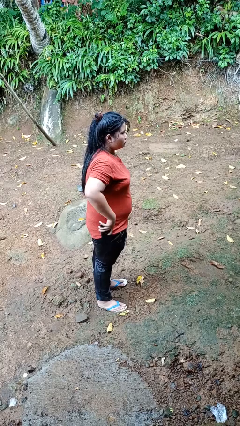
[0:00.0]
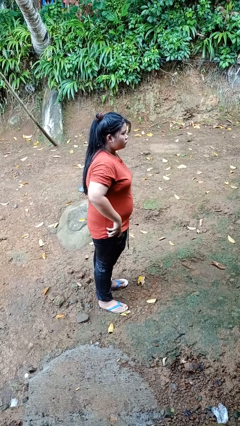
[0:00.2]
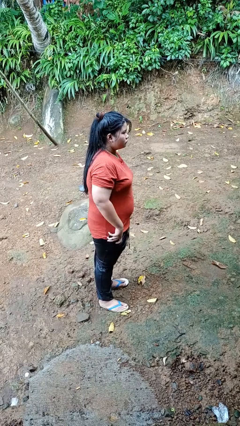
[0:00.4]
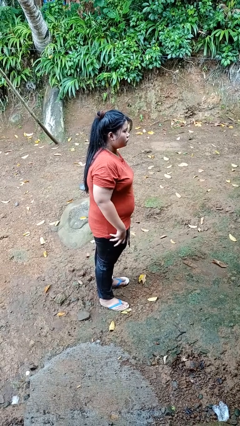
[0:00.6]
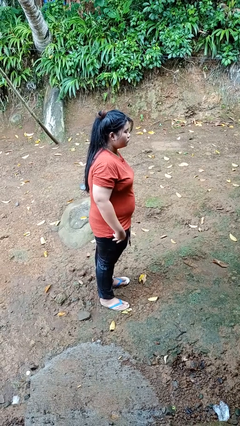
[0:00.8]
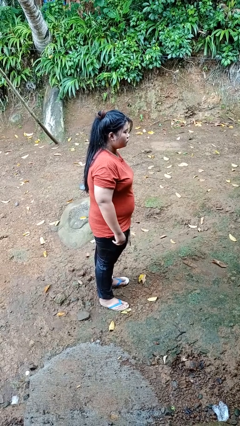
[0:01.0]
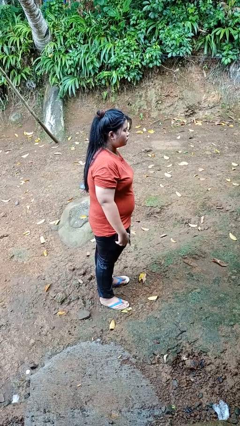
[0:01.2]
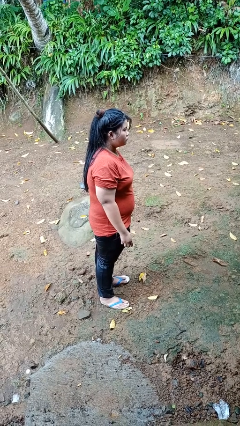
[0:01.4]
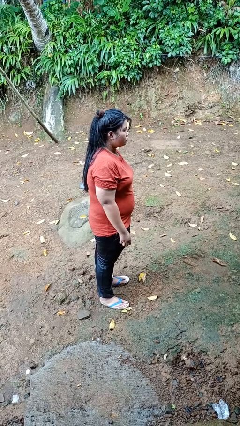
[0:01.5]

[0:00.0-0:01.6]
person puts phone into pocket

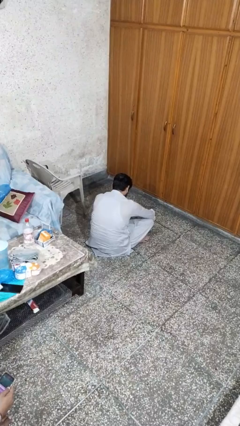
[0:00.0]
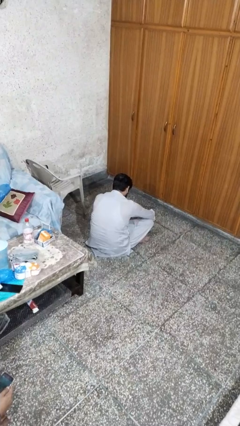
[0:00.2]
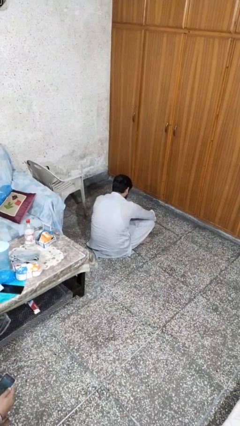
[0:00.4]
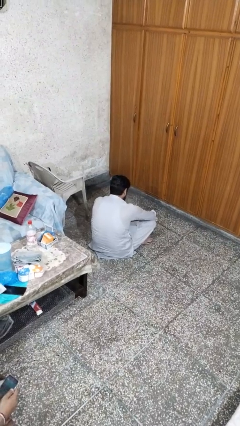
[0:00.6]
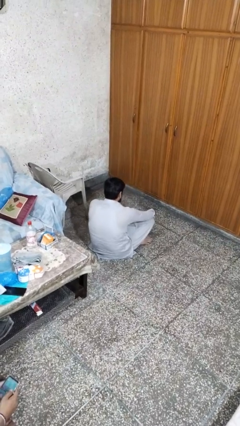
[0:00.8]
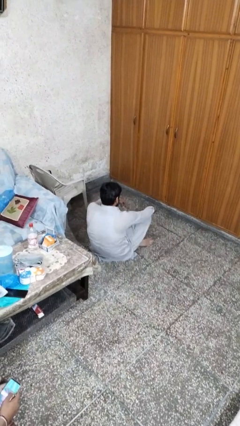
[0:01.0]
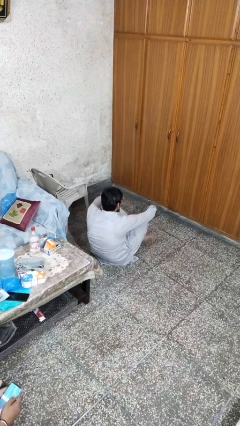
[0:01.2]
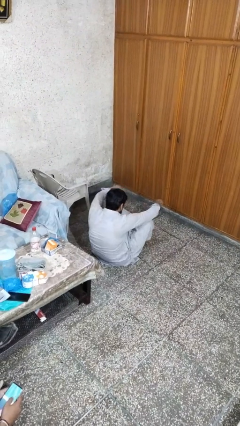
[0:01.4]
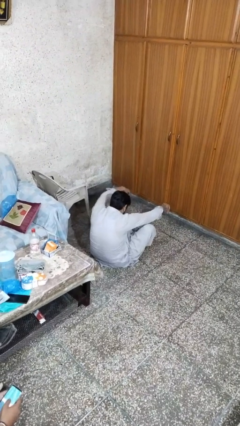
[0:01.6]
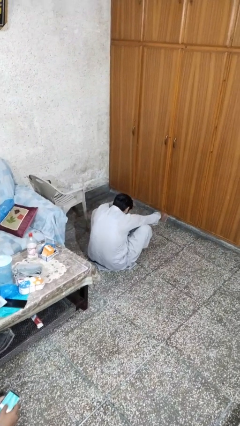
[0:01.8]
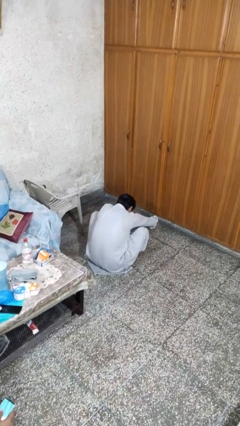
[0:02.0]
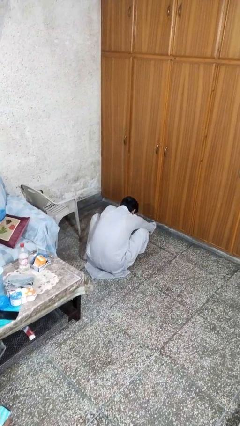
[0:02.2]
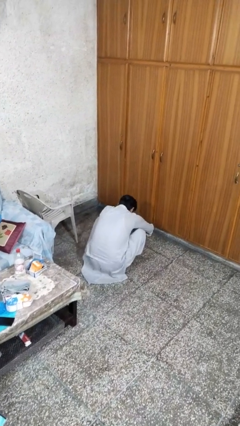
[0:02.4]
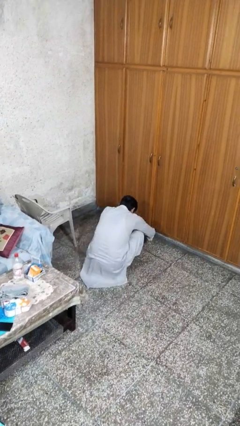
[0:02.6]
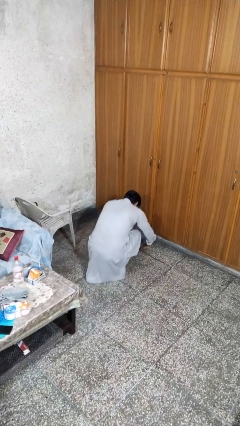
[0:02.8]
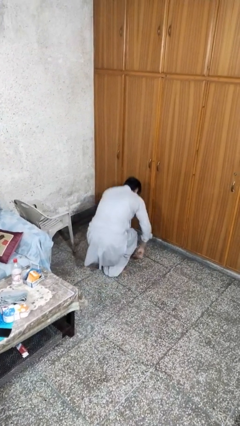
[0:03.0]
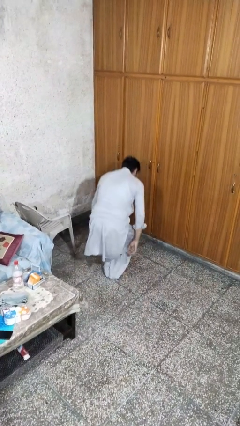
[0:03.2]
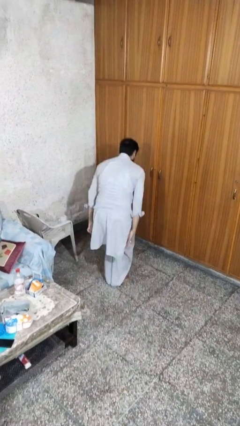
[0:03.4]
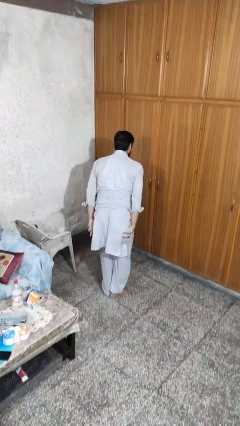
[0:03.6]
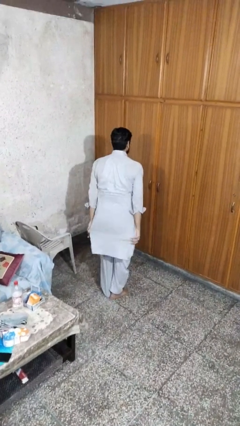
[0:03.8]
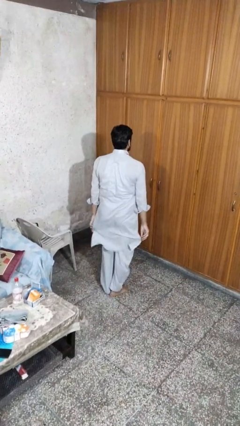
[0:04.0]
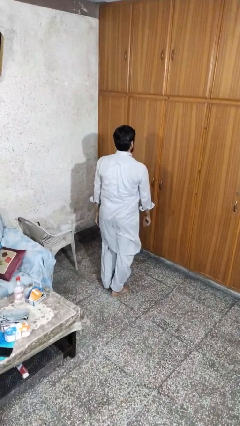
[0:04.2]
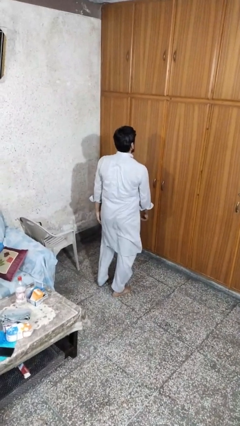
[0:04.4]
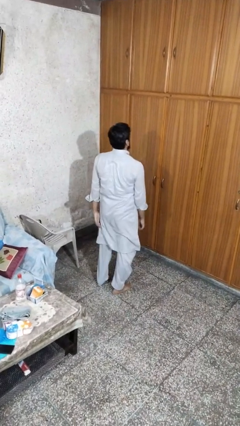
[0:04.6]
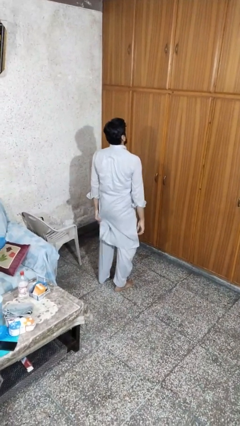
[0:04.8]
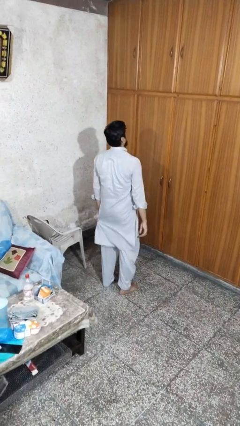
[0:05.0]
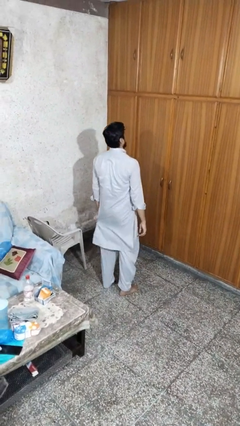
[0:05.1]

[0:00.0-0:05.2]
person stands up from floor

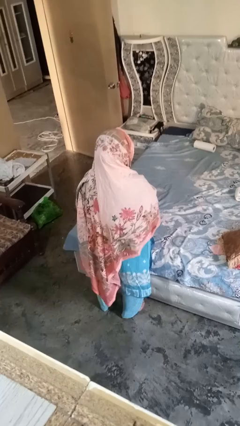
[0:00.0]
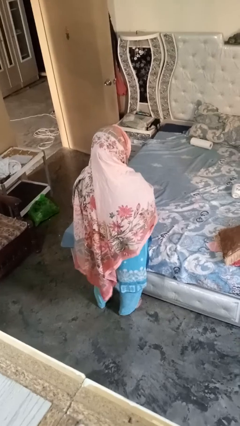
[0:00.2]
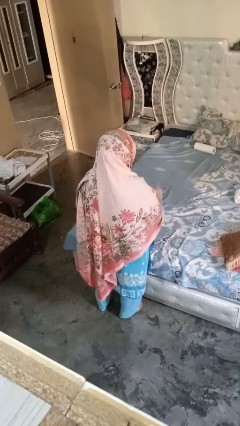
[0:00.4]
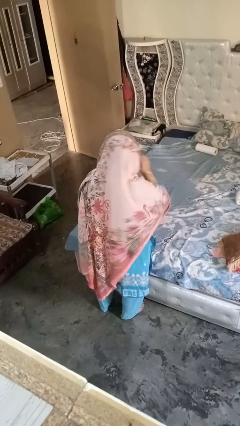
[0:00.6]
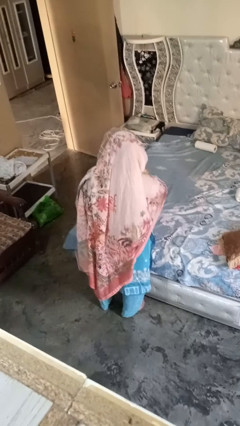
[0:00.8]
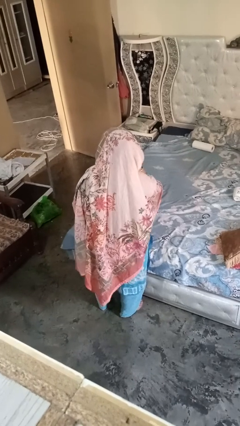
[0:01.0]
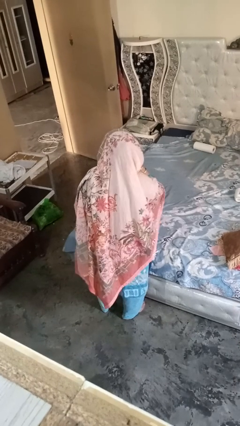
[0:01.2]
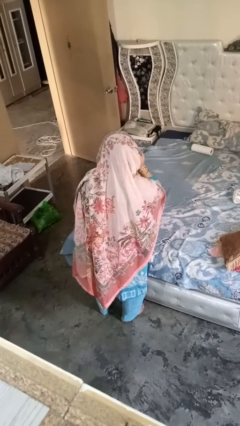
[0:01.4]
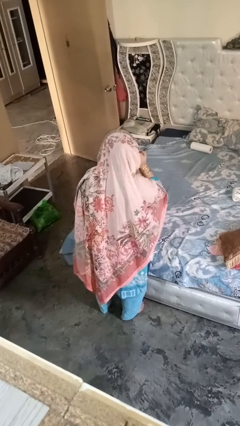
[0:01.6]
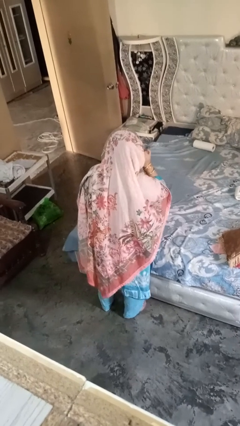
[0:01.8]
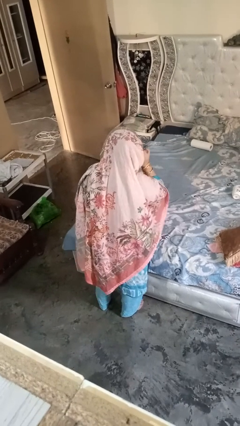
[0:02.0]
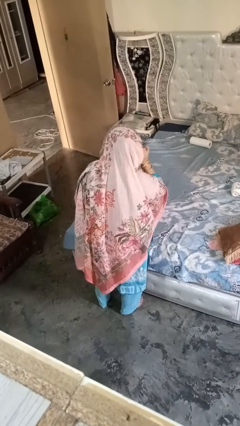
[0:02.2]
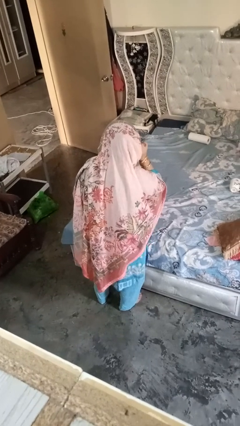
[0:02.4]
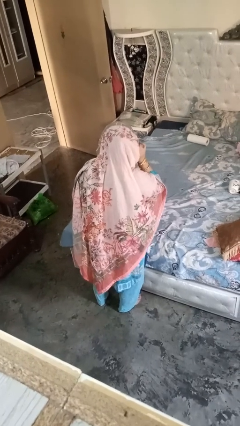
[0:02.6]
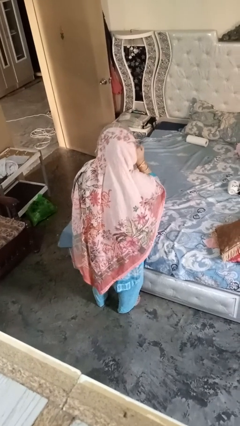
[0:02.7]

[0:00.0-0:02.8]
person gestures listen closely

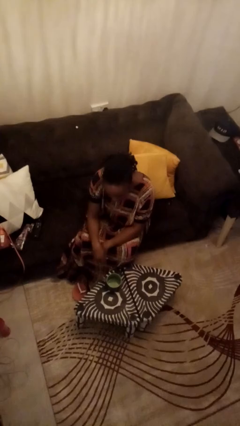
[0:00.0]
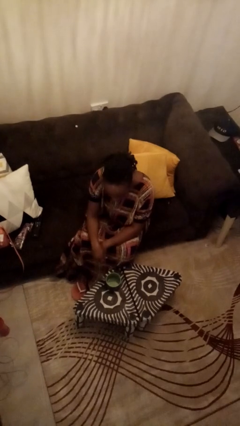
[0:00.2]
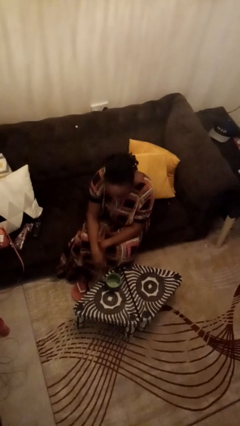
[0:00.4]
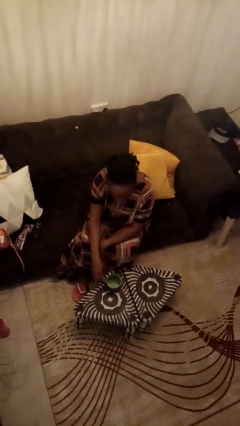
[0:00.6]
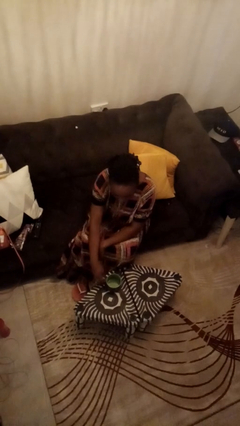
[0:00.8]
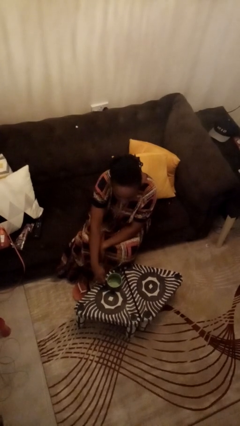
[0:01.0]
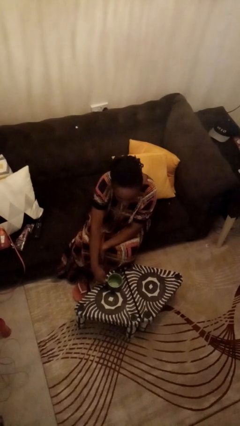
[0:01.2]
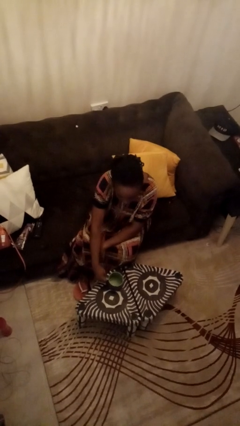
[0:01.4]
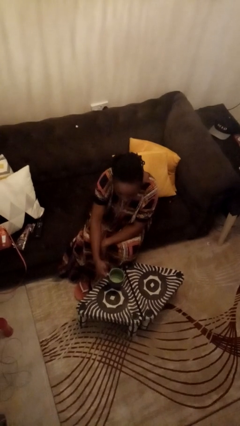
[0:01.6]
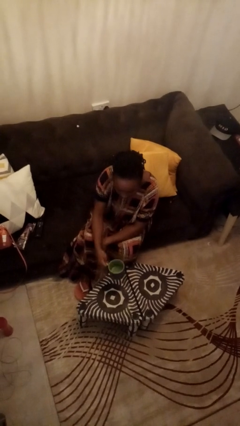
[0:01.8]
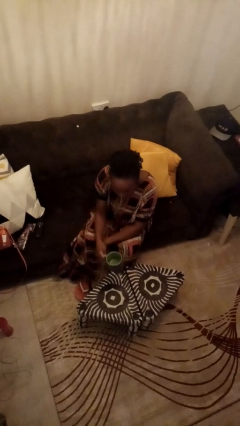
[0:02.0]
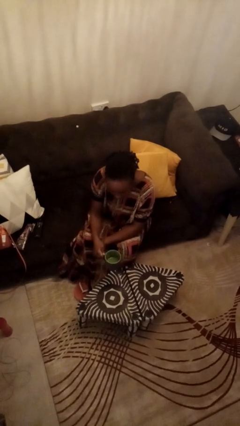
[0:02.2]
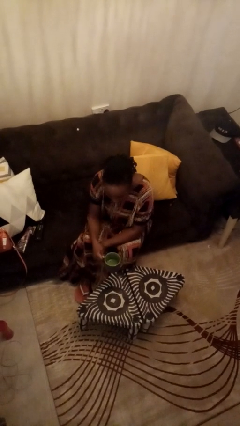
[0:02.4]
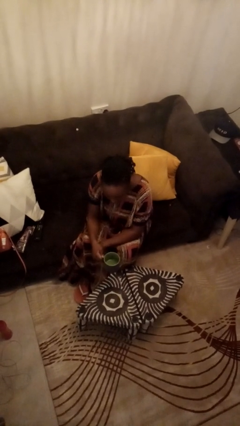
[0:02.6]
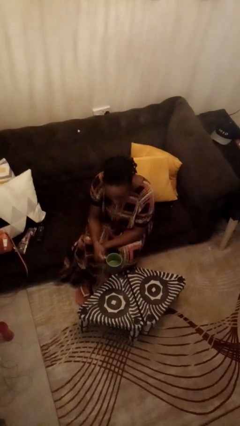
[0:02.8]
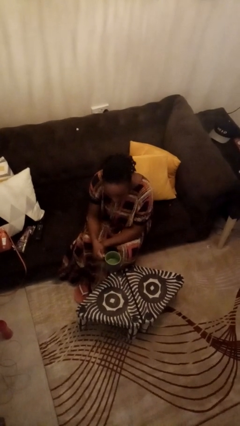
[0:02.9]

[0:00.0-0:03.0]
person picks up object from table

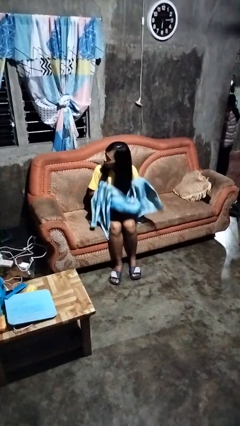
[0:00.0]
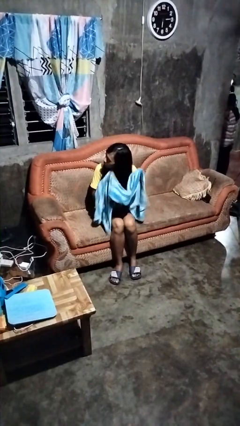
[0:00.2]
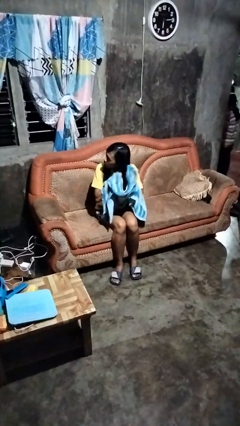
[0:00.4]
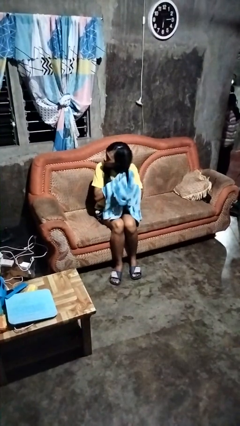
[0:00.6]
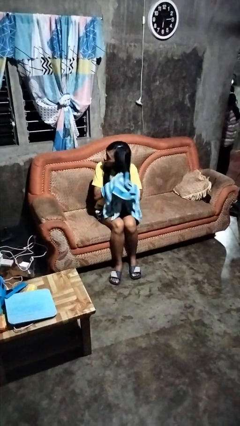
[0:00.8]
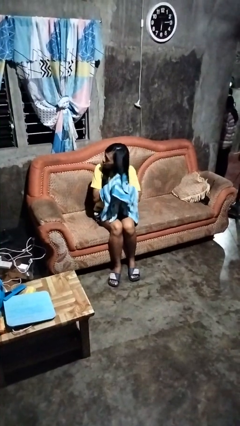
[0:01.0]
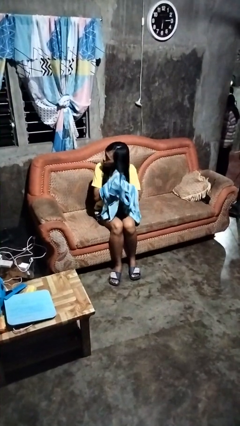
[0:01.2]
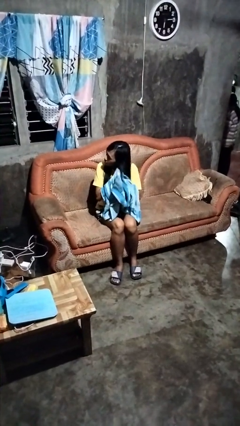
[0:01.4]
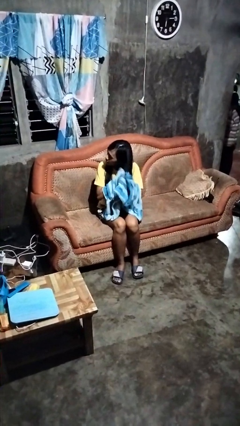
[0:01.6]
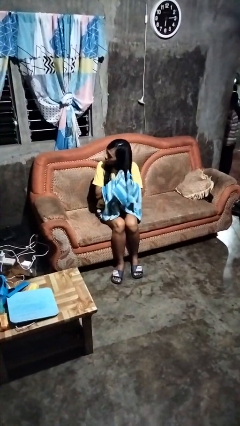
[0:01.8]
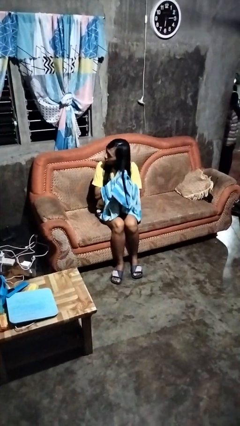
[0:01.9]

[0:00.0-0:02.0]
person dries hair with towel

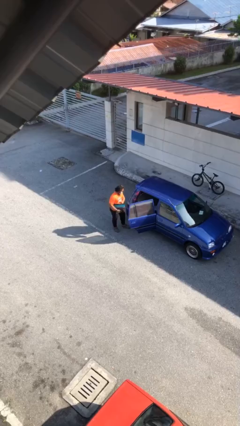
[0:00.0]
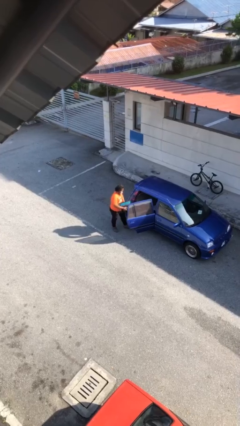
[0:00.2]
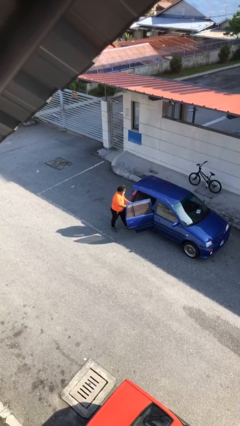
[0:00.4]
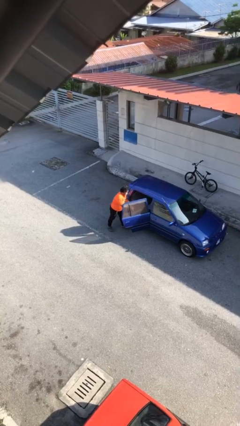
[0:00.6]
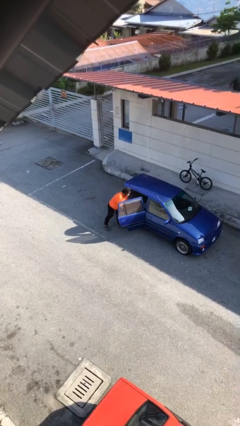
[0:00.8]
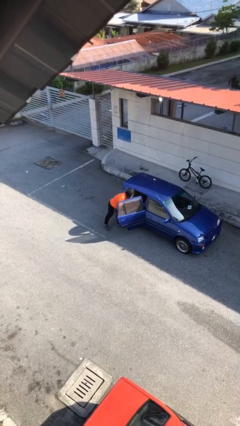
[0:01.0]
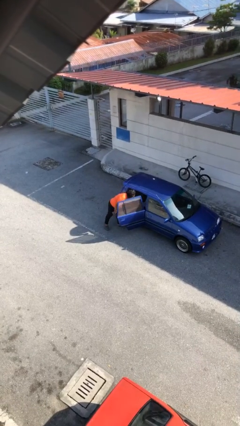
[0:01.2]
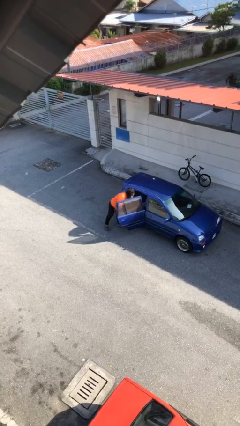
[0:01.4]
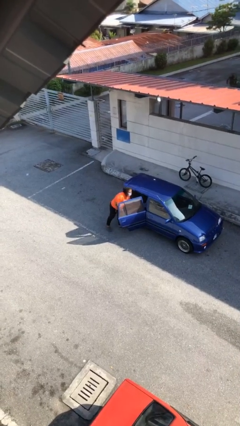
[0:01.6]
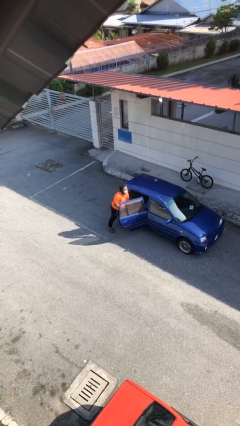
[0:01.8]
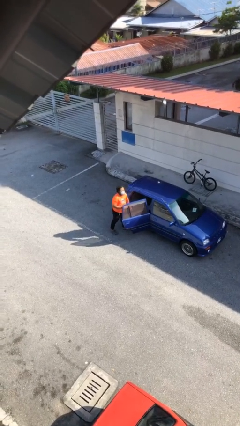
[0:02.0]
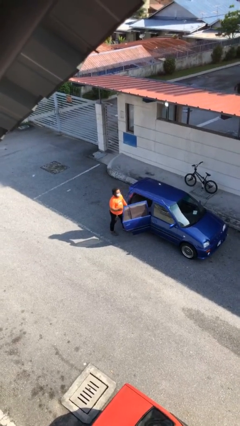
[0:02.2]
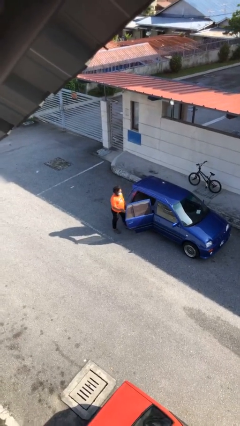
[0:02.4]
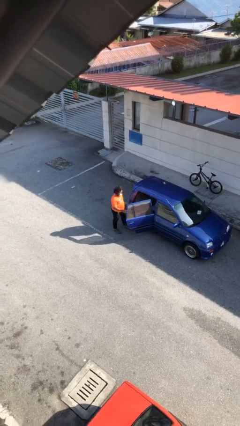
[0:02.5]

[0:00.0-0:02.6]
person loads car
